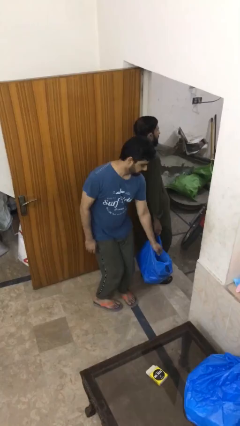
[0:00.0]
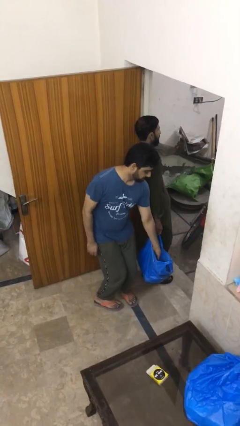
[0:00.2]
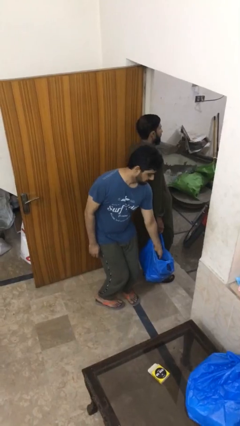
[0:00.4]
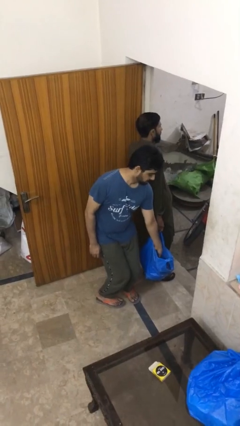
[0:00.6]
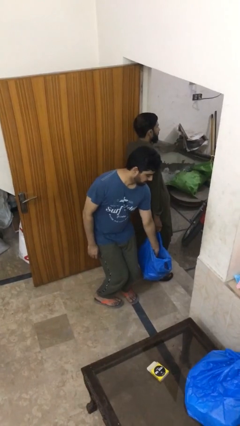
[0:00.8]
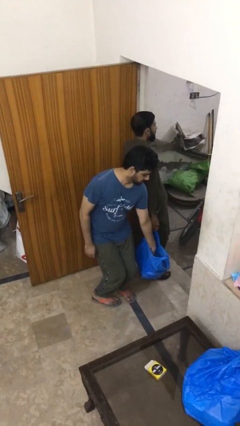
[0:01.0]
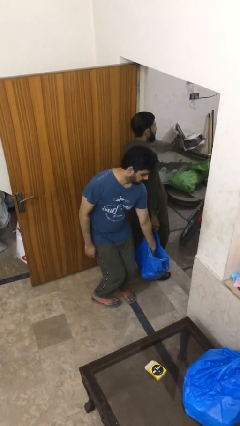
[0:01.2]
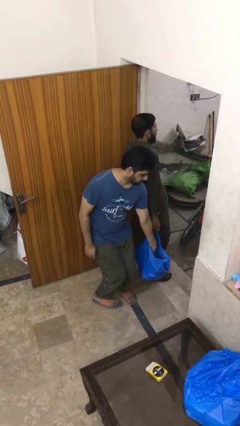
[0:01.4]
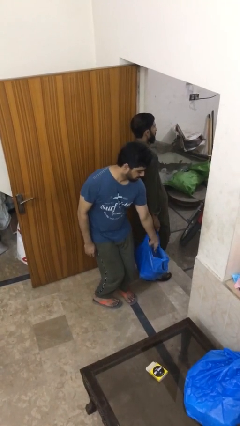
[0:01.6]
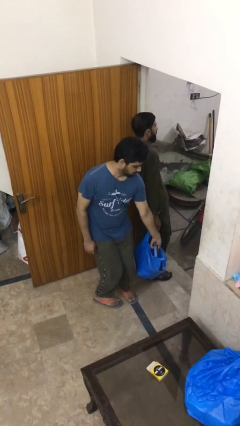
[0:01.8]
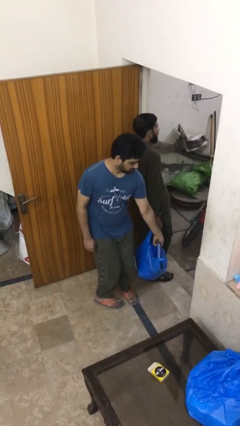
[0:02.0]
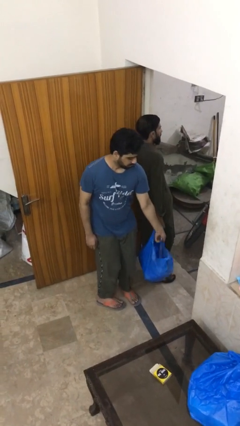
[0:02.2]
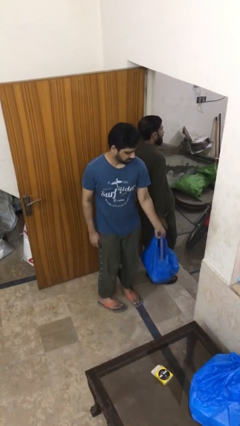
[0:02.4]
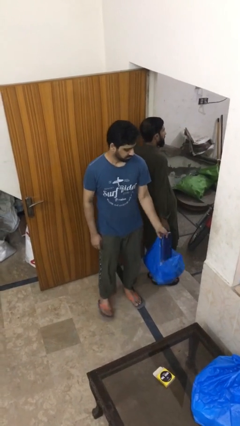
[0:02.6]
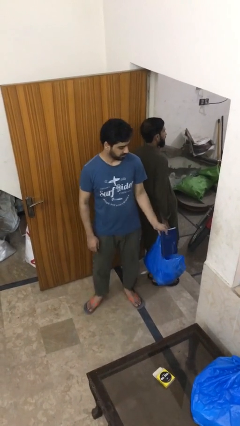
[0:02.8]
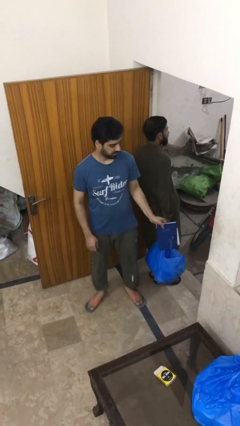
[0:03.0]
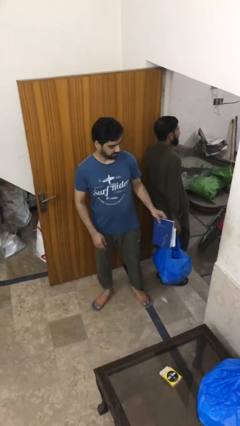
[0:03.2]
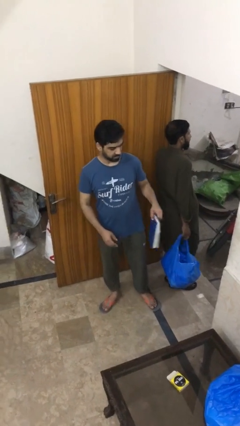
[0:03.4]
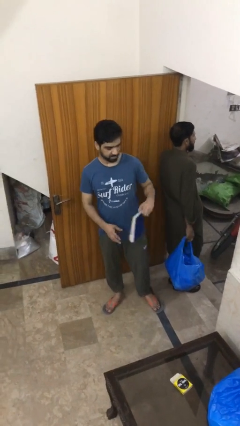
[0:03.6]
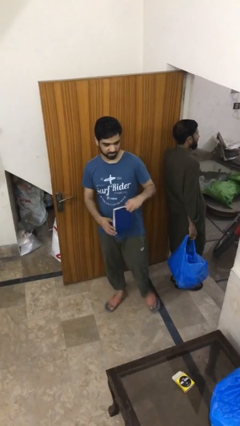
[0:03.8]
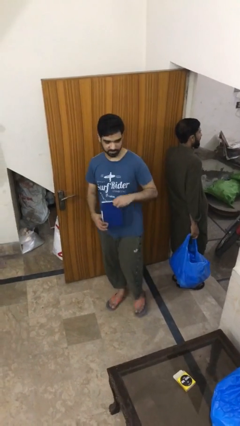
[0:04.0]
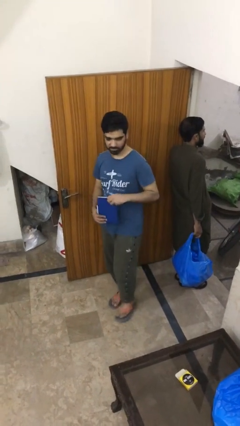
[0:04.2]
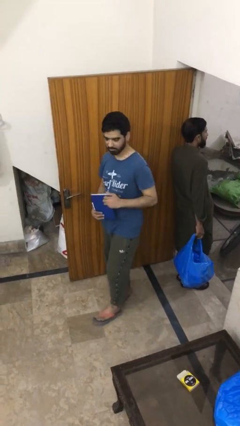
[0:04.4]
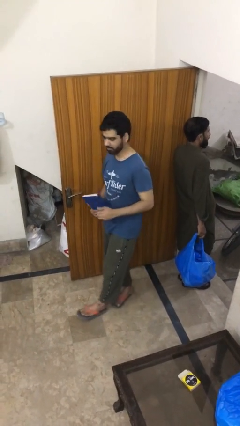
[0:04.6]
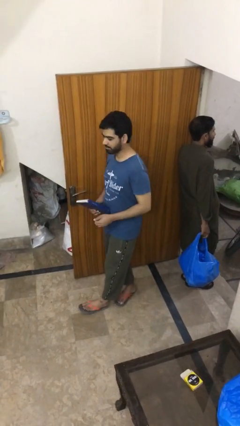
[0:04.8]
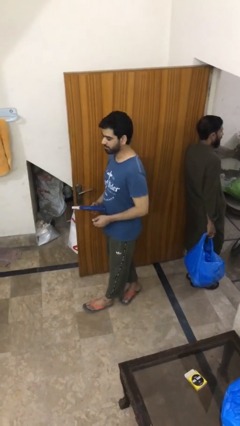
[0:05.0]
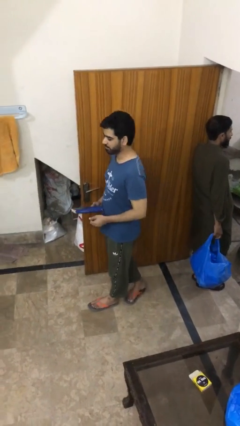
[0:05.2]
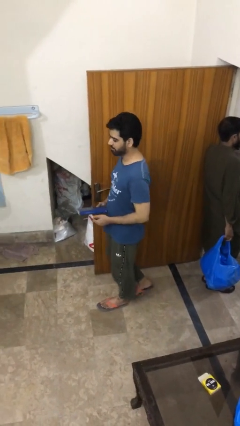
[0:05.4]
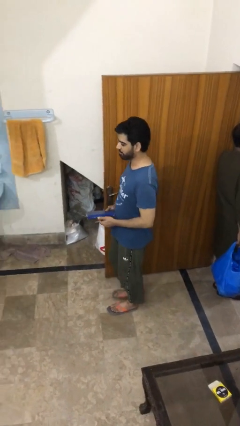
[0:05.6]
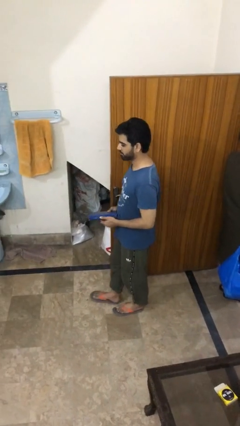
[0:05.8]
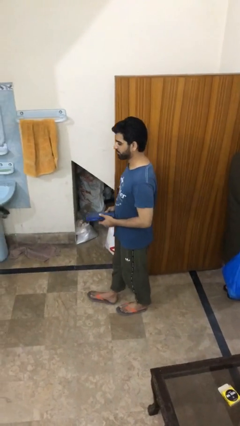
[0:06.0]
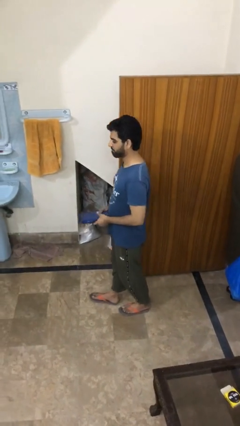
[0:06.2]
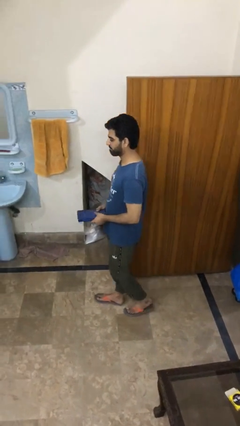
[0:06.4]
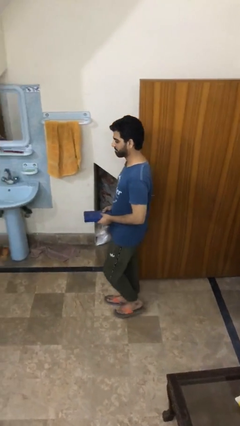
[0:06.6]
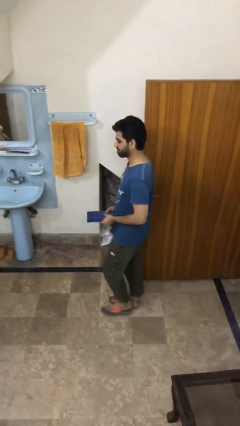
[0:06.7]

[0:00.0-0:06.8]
person steals object from person

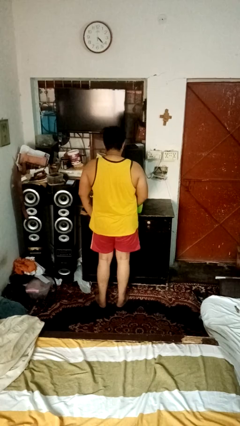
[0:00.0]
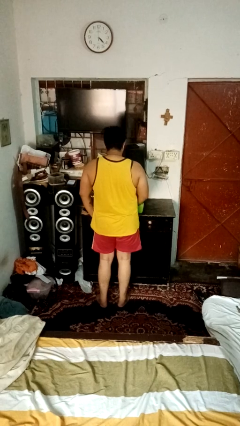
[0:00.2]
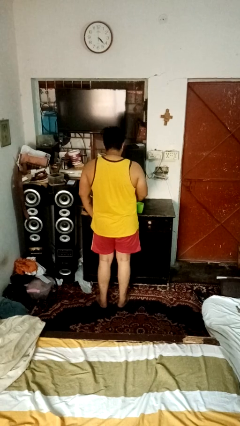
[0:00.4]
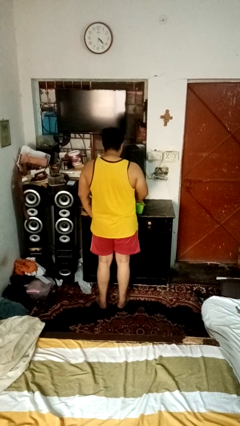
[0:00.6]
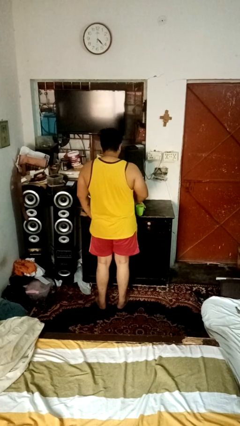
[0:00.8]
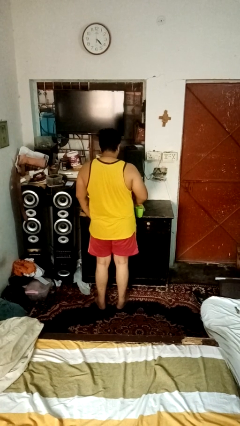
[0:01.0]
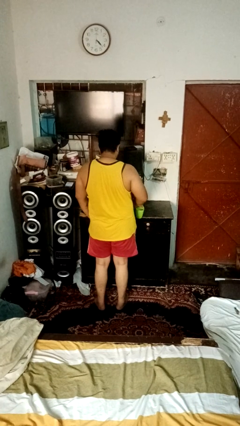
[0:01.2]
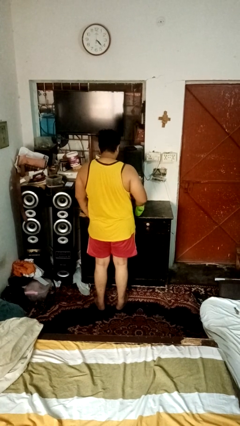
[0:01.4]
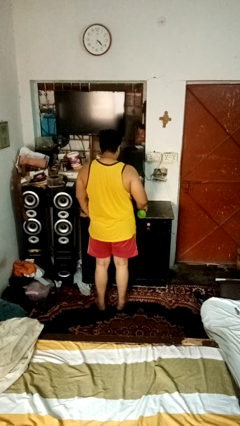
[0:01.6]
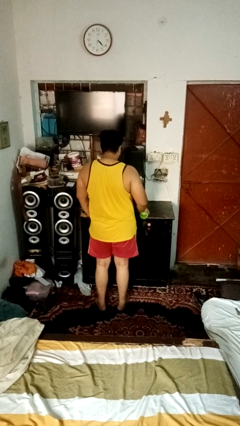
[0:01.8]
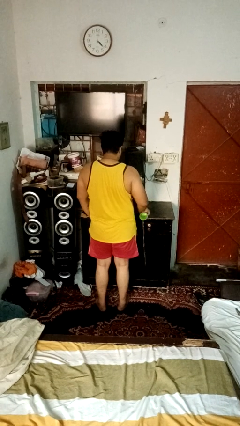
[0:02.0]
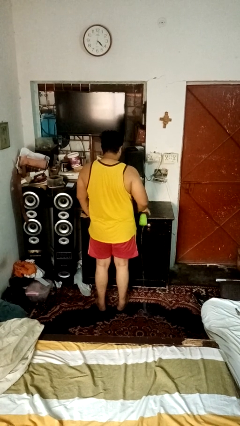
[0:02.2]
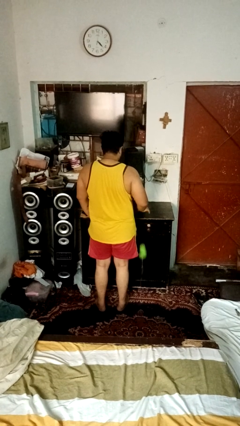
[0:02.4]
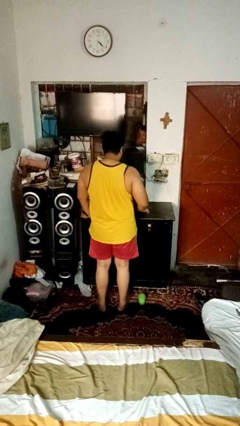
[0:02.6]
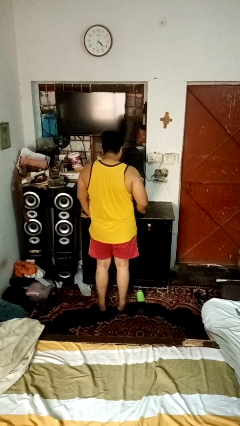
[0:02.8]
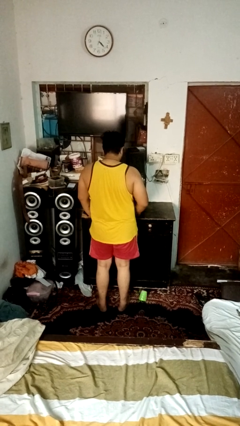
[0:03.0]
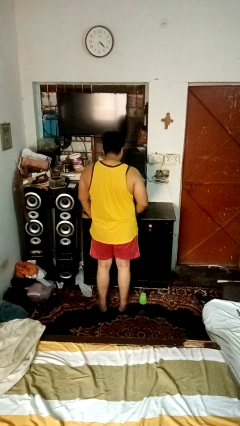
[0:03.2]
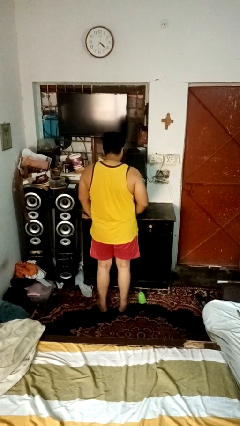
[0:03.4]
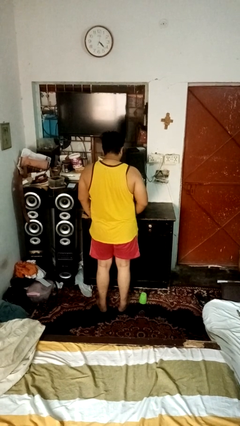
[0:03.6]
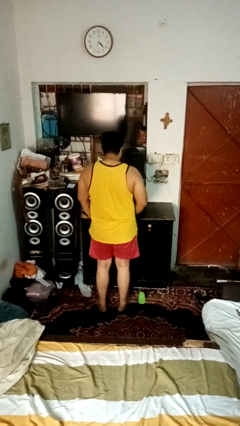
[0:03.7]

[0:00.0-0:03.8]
person spills on floor

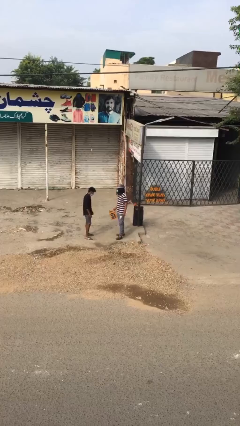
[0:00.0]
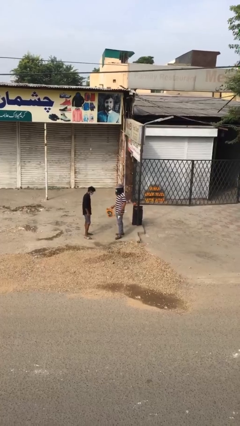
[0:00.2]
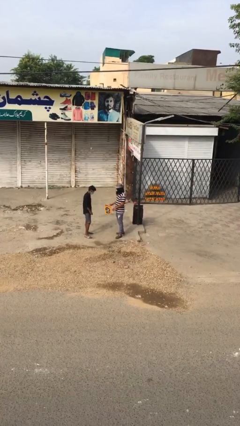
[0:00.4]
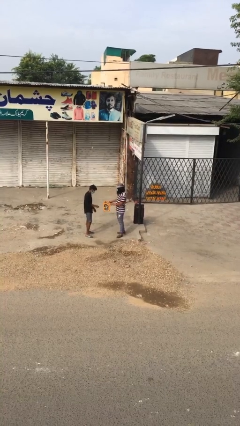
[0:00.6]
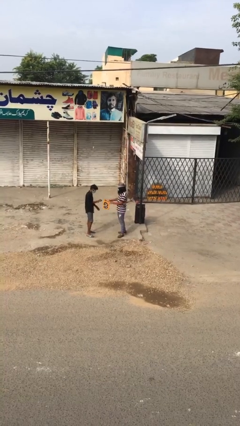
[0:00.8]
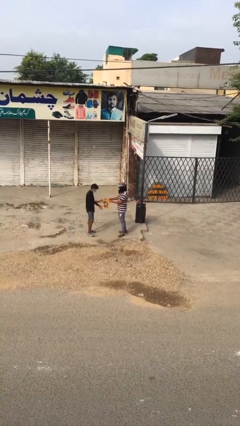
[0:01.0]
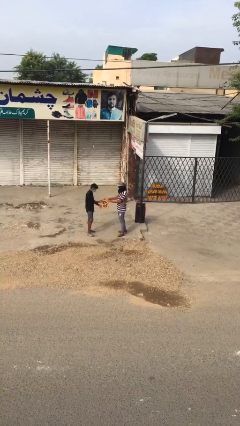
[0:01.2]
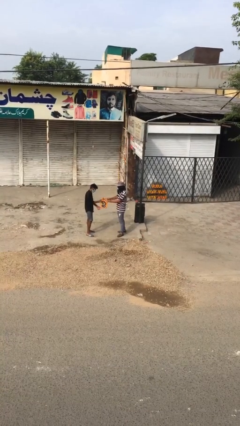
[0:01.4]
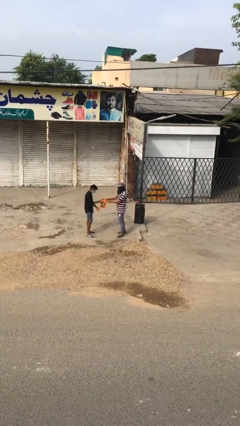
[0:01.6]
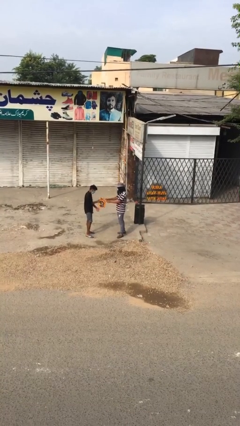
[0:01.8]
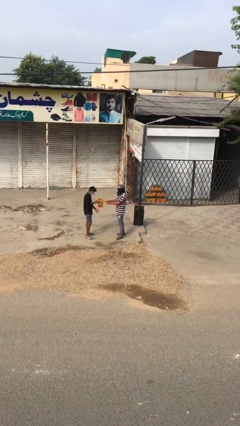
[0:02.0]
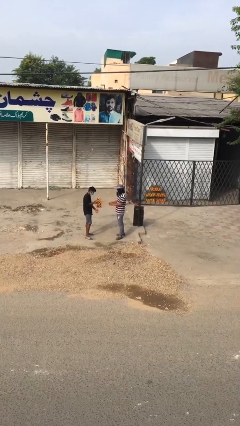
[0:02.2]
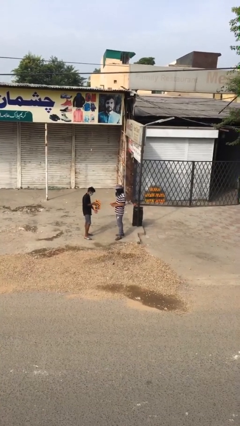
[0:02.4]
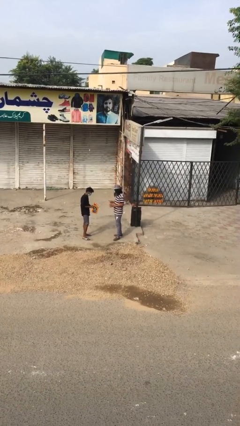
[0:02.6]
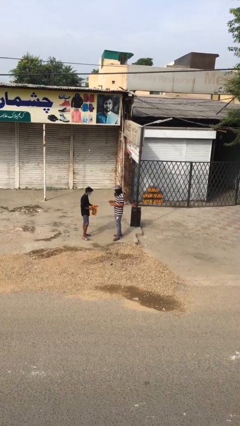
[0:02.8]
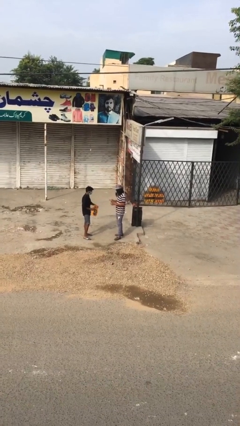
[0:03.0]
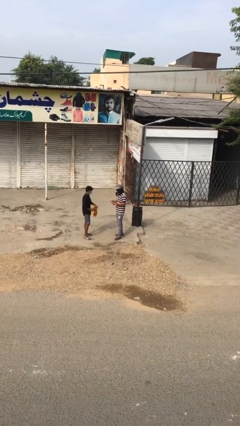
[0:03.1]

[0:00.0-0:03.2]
person transfers object to person

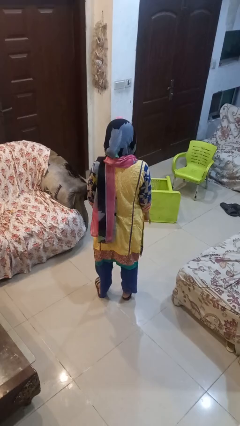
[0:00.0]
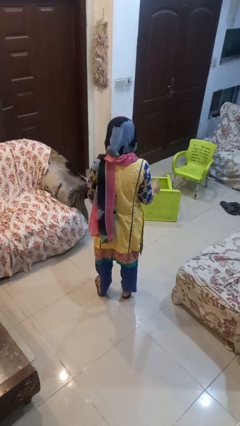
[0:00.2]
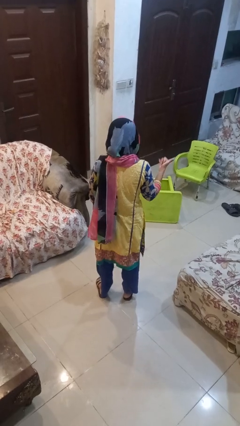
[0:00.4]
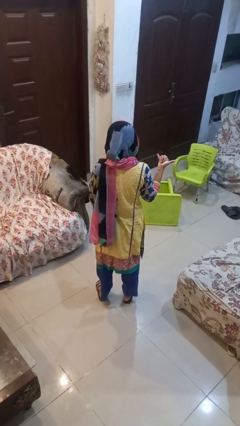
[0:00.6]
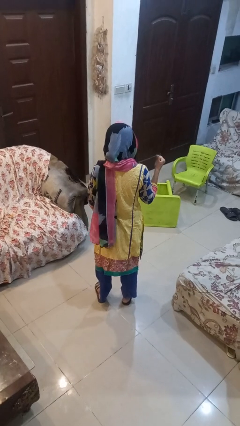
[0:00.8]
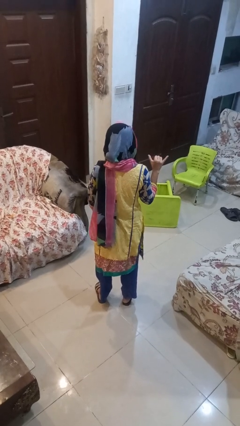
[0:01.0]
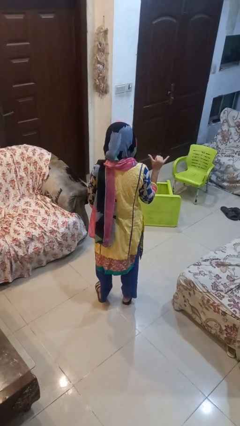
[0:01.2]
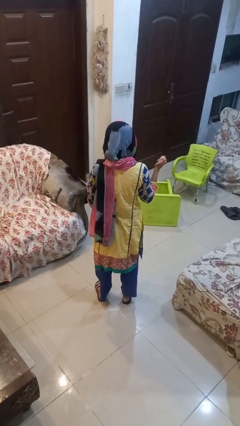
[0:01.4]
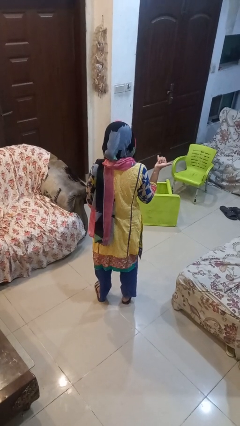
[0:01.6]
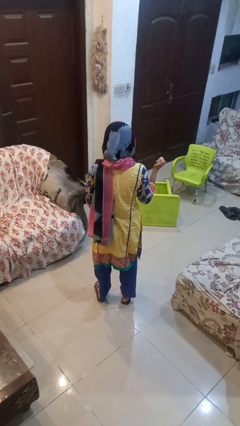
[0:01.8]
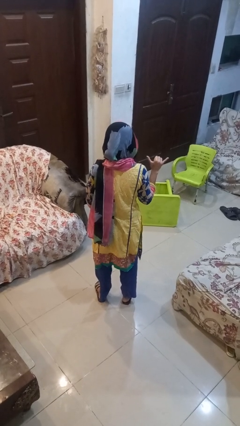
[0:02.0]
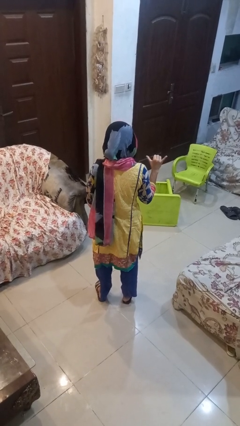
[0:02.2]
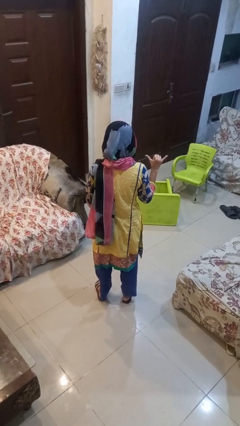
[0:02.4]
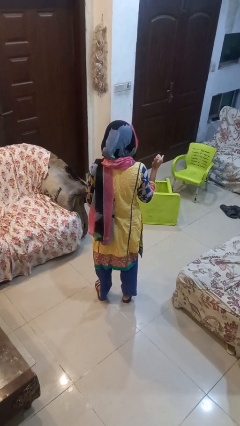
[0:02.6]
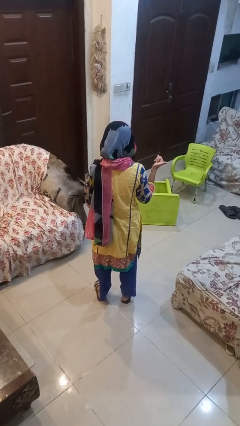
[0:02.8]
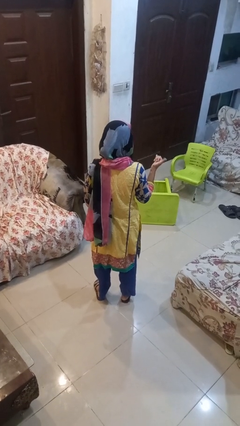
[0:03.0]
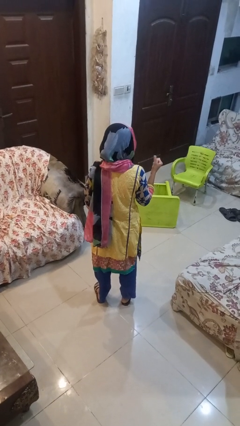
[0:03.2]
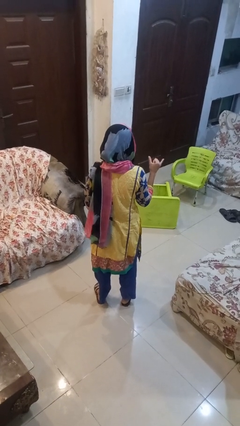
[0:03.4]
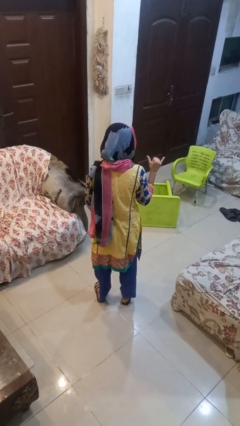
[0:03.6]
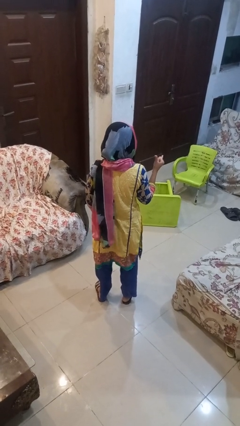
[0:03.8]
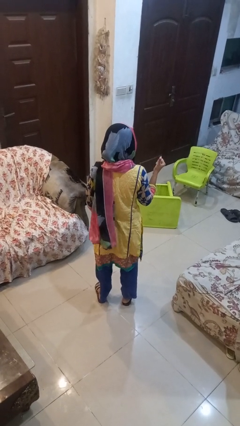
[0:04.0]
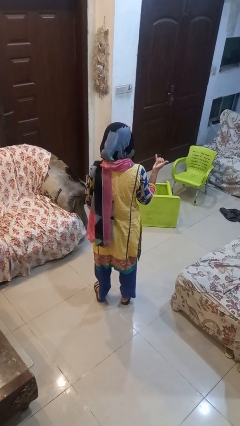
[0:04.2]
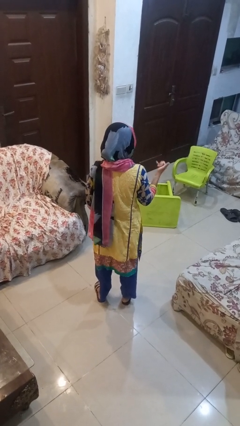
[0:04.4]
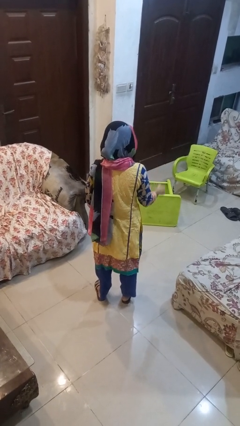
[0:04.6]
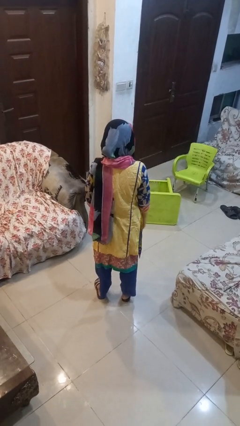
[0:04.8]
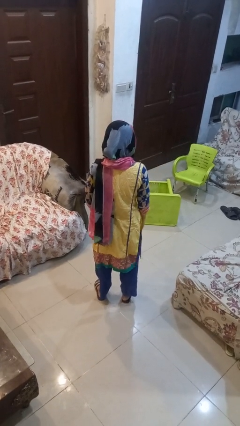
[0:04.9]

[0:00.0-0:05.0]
person gestures hang loose
